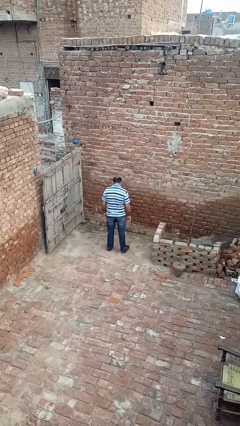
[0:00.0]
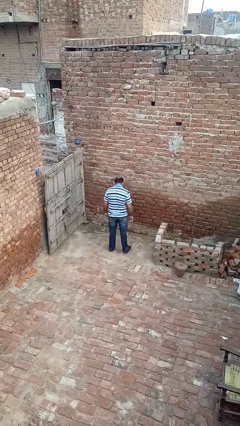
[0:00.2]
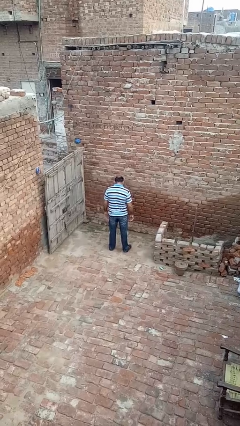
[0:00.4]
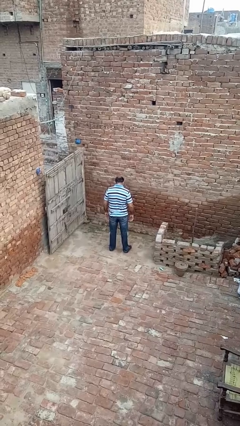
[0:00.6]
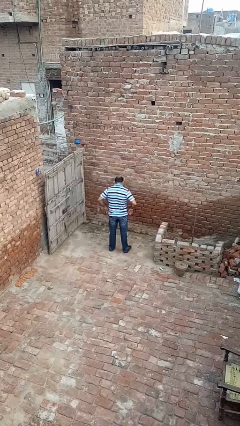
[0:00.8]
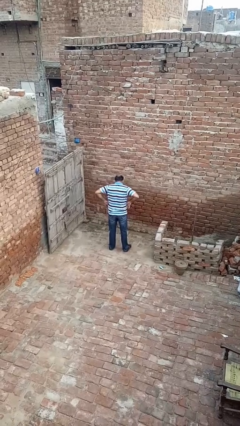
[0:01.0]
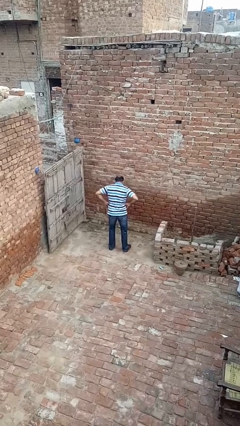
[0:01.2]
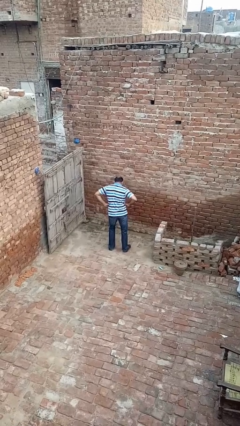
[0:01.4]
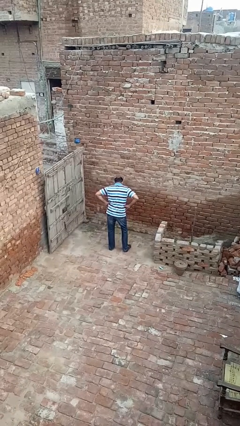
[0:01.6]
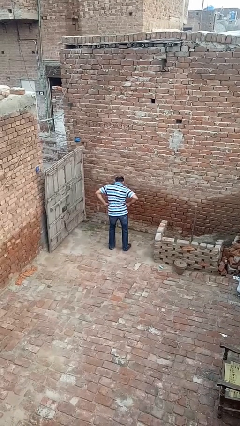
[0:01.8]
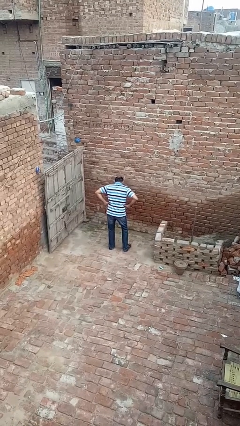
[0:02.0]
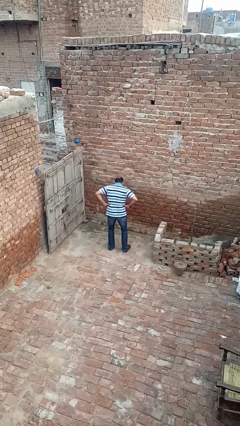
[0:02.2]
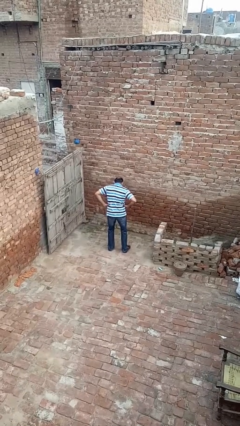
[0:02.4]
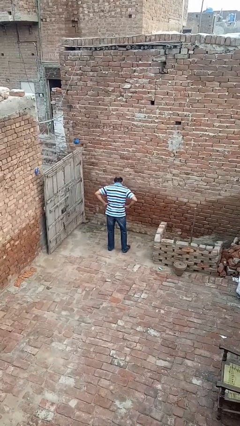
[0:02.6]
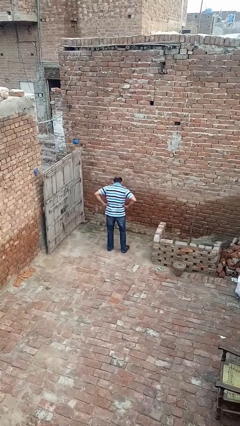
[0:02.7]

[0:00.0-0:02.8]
person wiggles hips

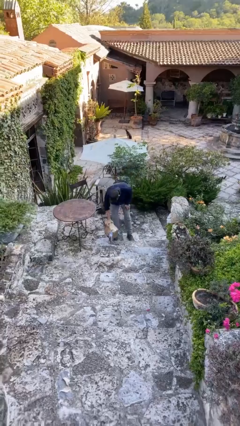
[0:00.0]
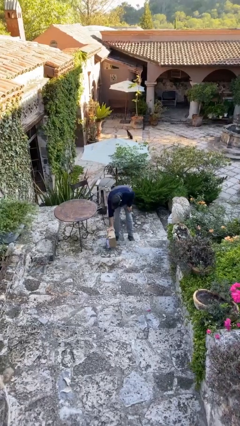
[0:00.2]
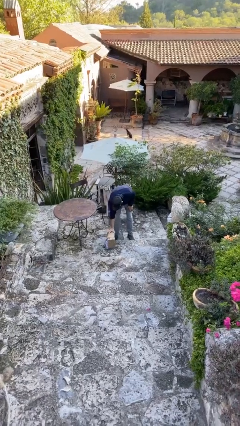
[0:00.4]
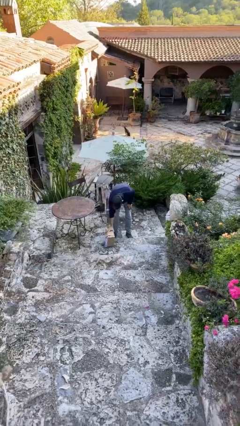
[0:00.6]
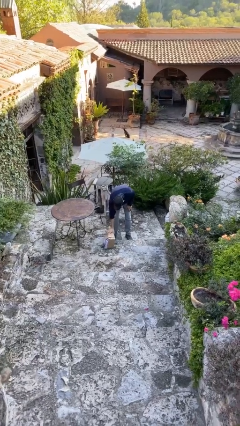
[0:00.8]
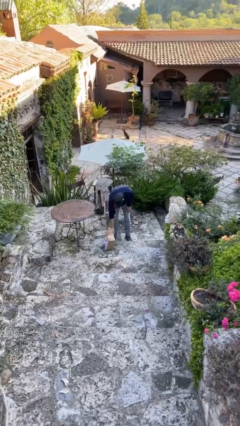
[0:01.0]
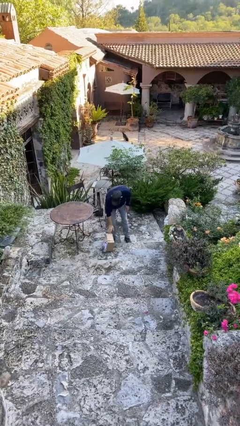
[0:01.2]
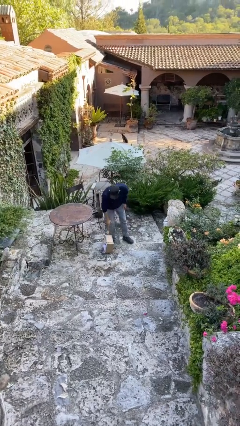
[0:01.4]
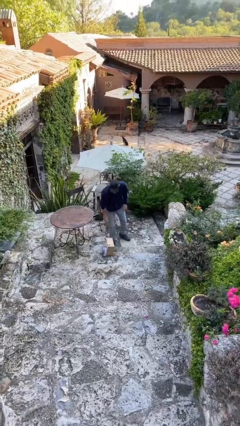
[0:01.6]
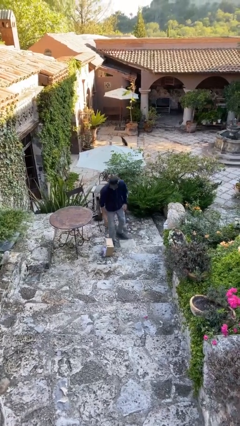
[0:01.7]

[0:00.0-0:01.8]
person puts down object on floor

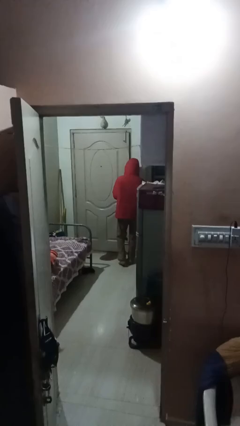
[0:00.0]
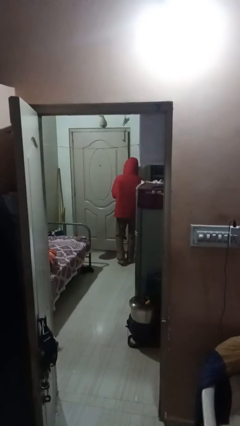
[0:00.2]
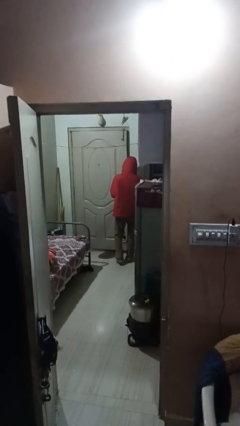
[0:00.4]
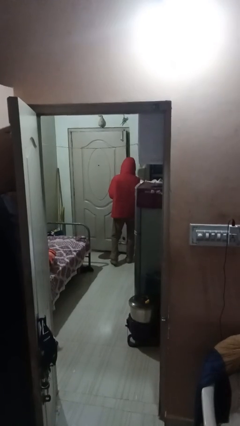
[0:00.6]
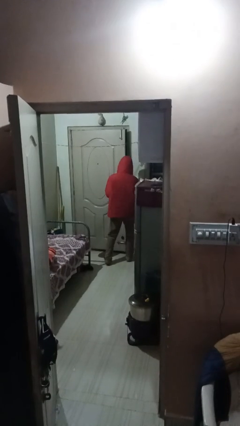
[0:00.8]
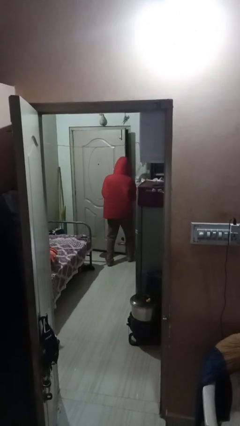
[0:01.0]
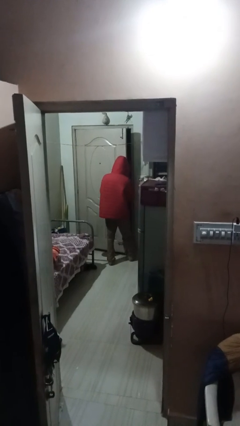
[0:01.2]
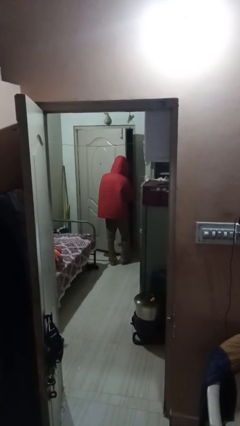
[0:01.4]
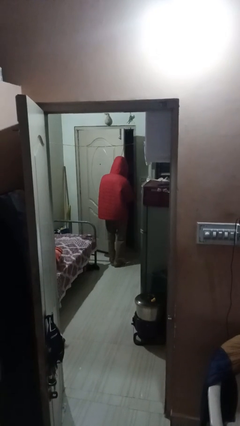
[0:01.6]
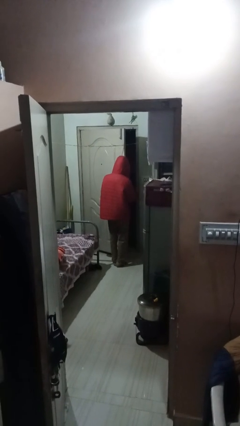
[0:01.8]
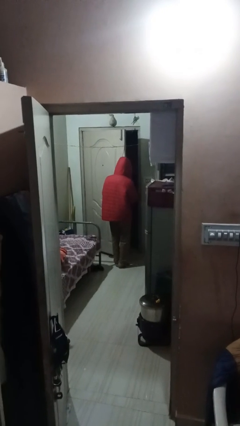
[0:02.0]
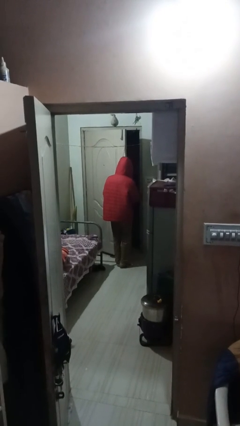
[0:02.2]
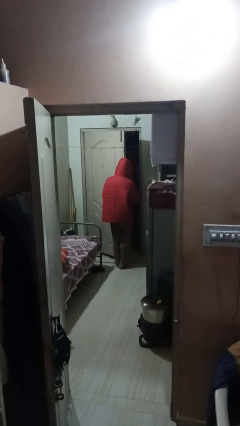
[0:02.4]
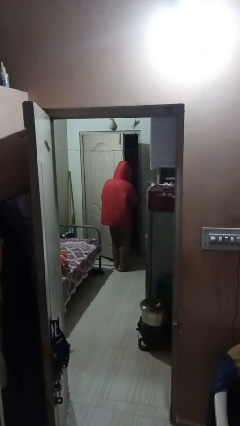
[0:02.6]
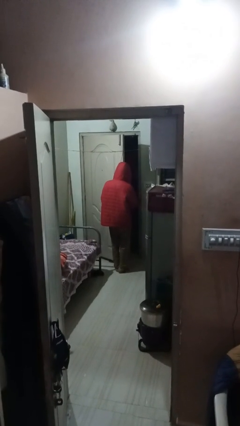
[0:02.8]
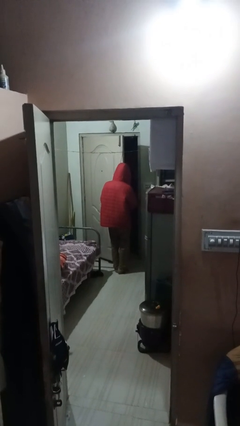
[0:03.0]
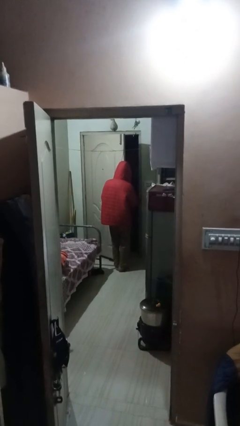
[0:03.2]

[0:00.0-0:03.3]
person opens facility door

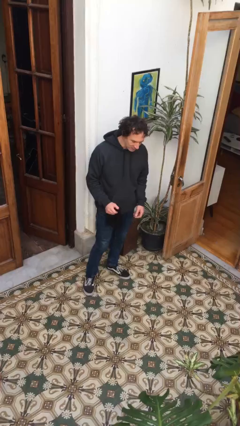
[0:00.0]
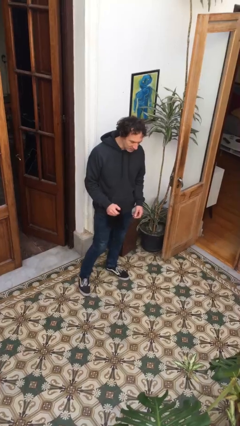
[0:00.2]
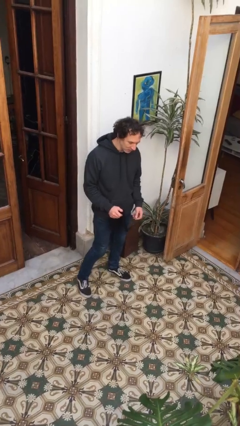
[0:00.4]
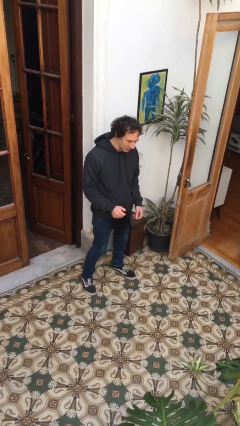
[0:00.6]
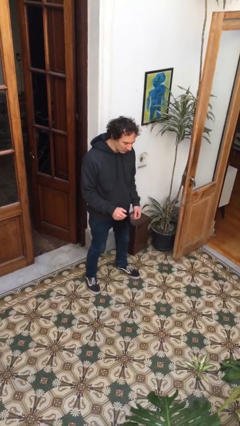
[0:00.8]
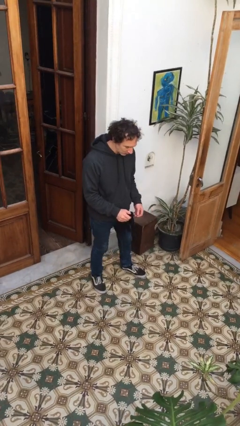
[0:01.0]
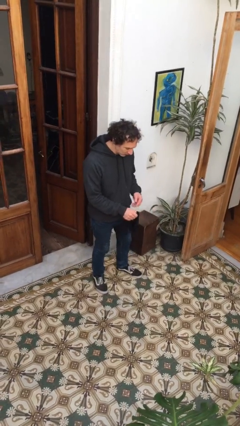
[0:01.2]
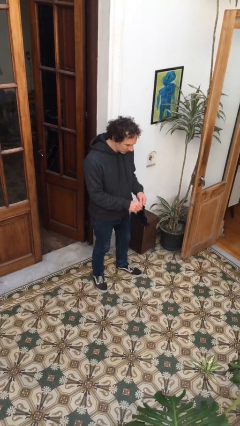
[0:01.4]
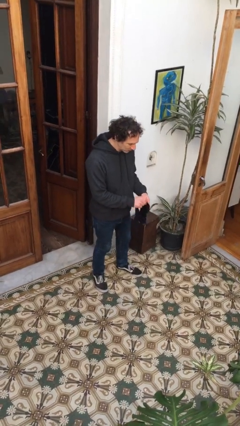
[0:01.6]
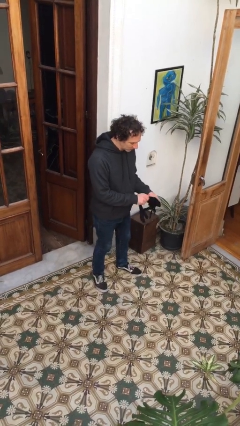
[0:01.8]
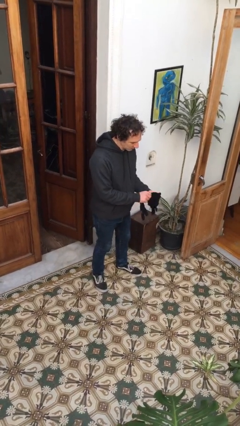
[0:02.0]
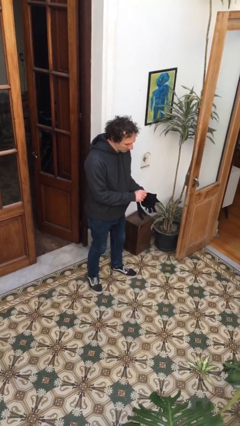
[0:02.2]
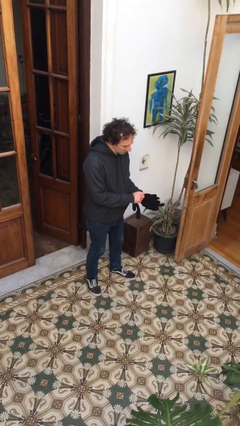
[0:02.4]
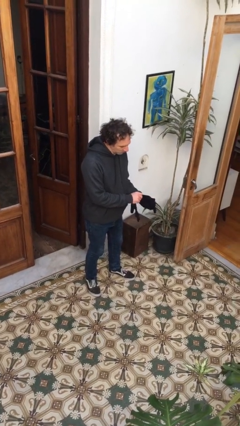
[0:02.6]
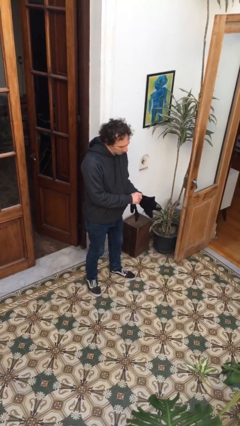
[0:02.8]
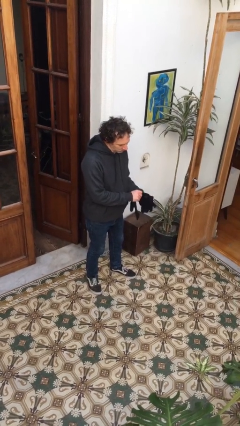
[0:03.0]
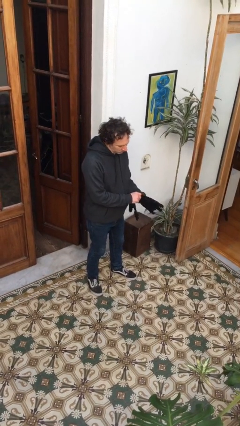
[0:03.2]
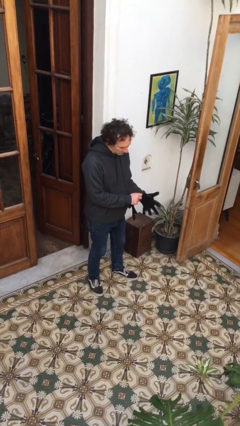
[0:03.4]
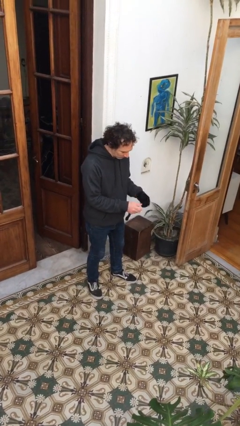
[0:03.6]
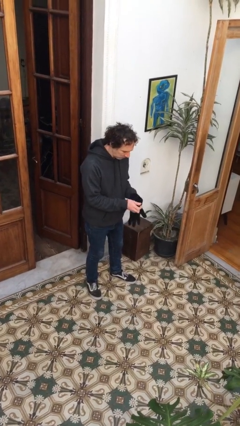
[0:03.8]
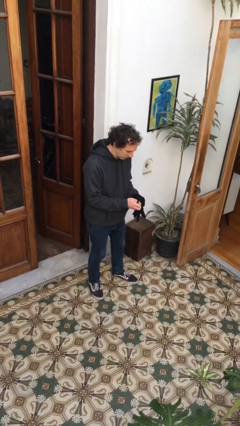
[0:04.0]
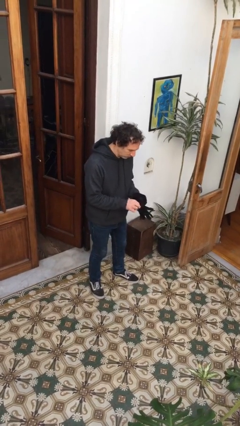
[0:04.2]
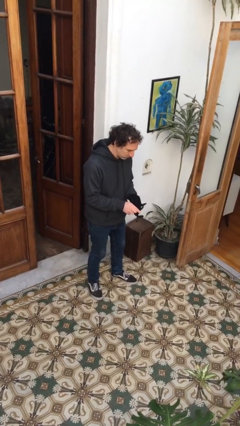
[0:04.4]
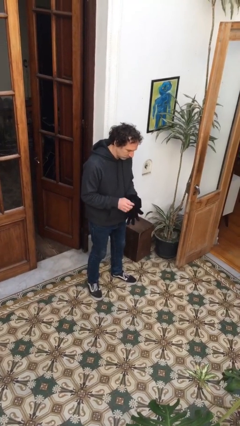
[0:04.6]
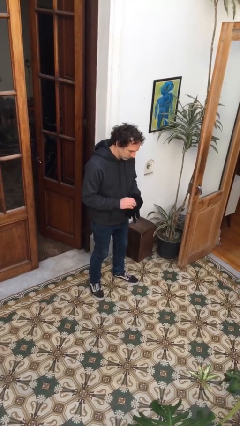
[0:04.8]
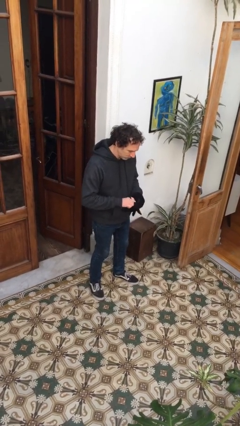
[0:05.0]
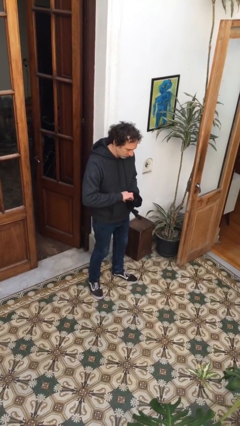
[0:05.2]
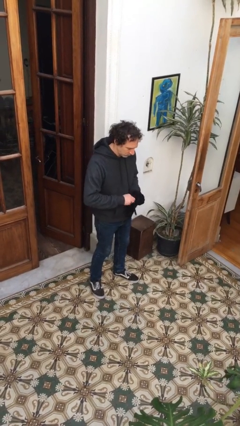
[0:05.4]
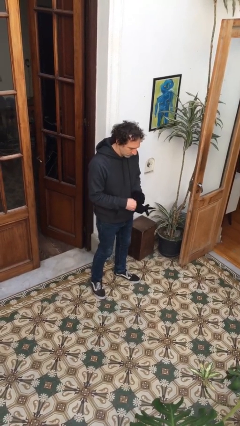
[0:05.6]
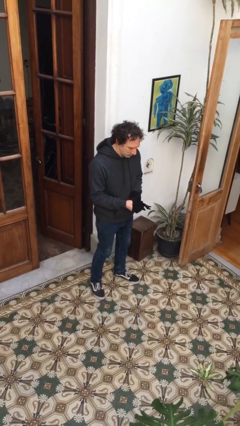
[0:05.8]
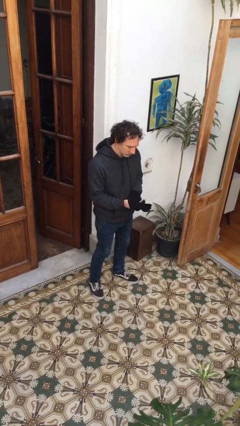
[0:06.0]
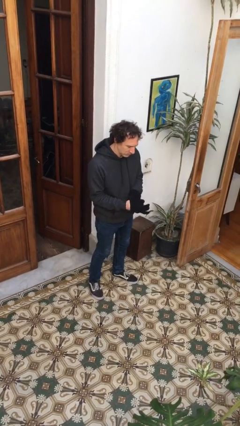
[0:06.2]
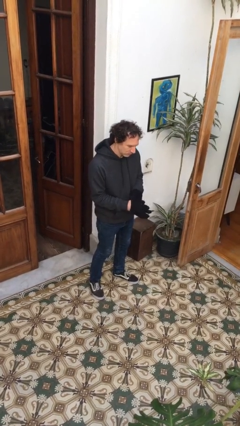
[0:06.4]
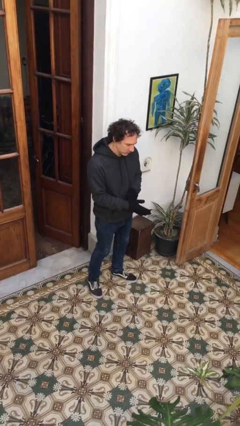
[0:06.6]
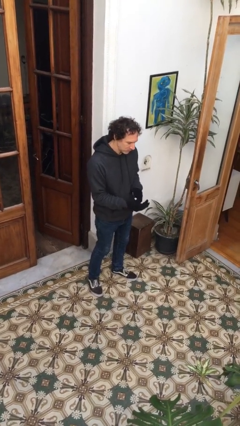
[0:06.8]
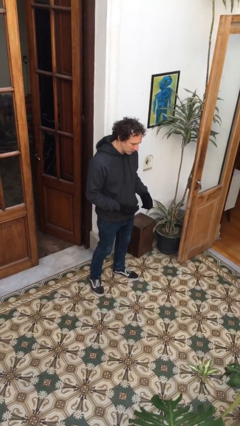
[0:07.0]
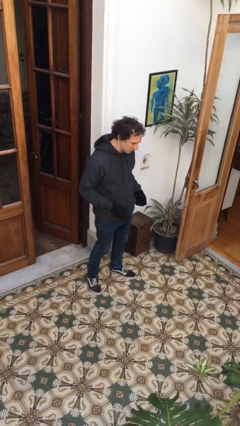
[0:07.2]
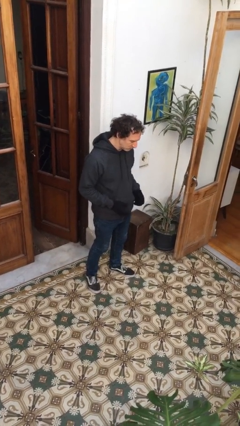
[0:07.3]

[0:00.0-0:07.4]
person puts on gloves

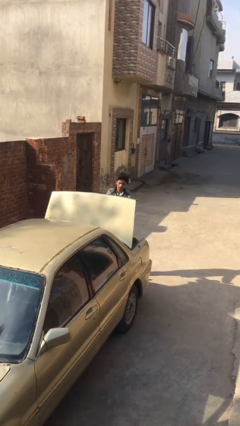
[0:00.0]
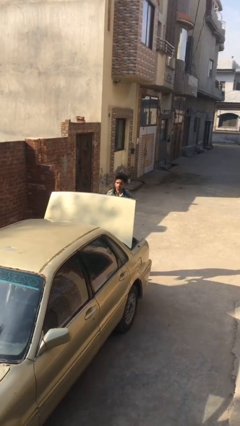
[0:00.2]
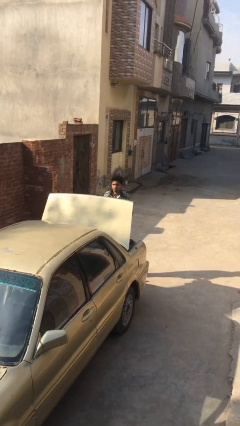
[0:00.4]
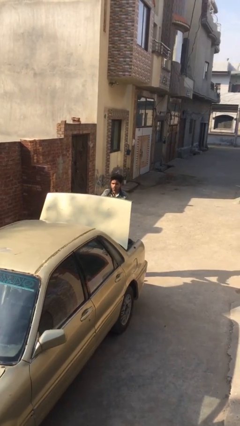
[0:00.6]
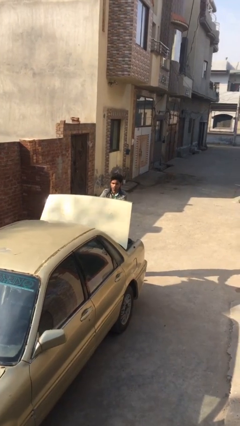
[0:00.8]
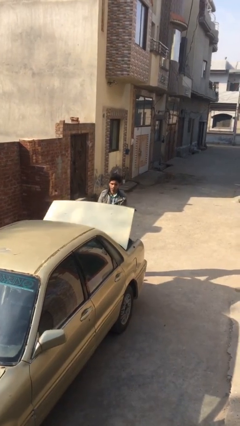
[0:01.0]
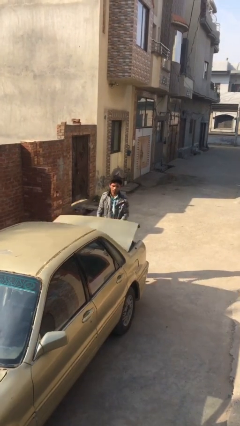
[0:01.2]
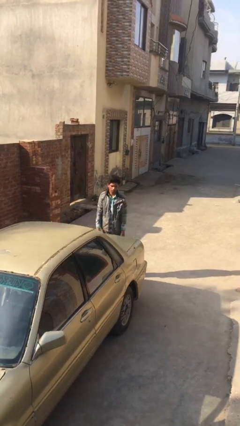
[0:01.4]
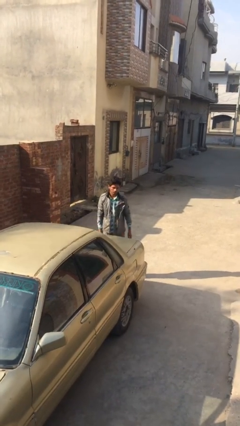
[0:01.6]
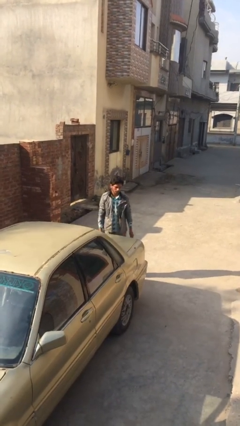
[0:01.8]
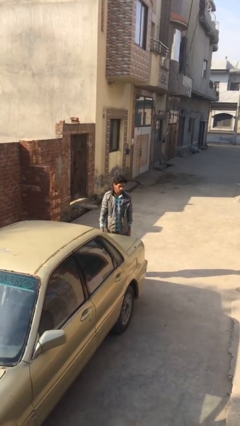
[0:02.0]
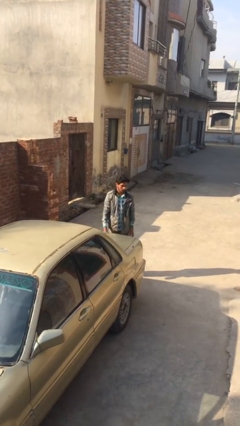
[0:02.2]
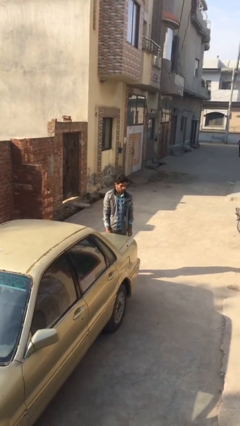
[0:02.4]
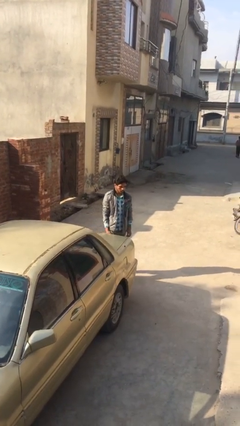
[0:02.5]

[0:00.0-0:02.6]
person closes car trunk
